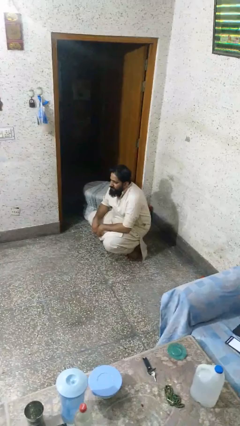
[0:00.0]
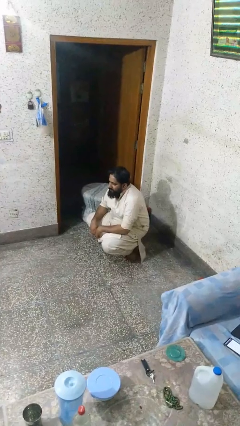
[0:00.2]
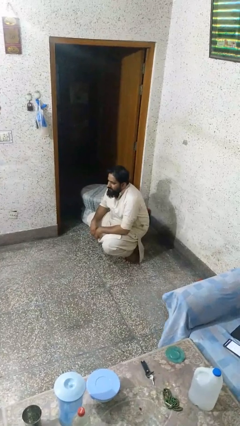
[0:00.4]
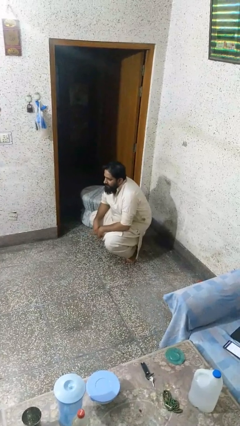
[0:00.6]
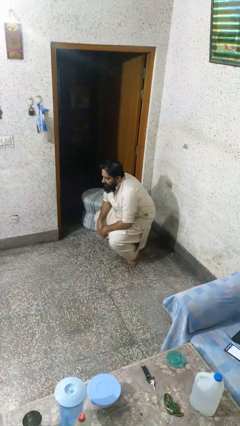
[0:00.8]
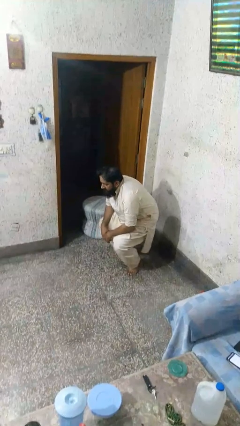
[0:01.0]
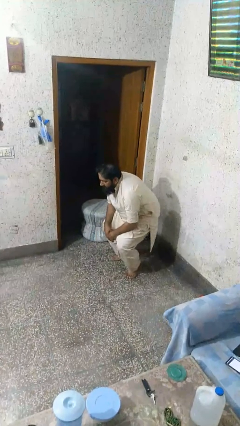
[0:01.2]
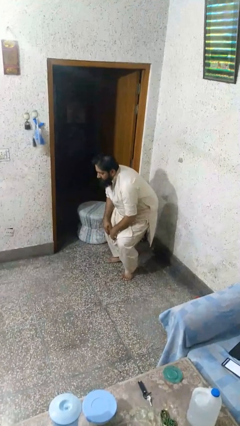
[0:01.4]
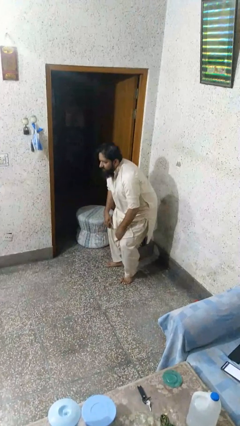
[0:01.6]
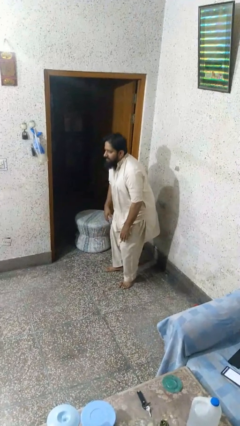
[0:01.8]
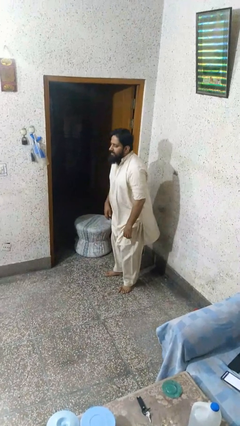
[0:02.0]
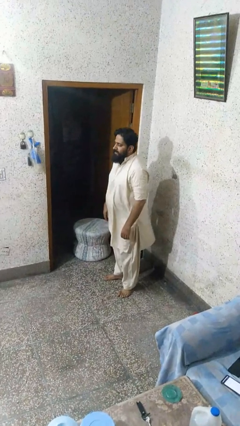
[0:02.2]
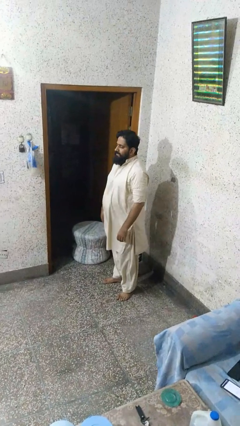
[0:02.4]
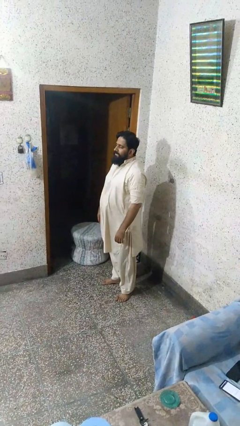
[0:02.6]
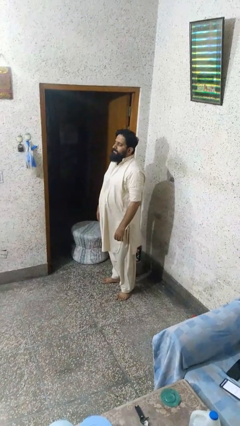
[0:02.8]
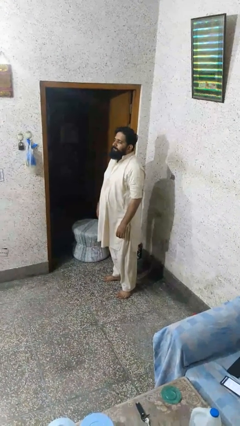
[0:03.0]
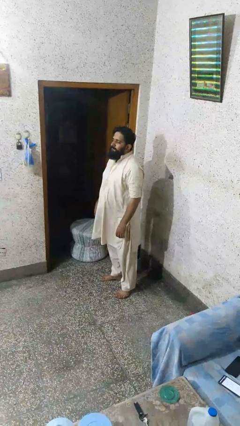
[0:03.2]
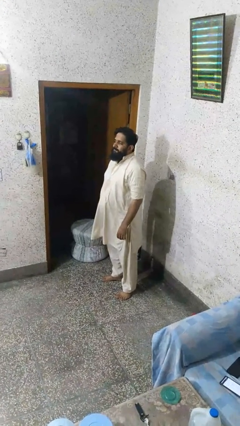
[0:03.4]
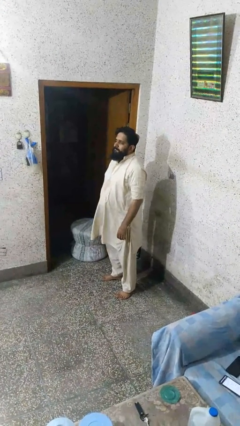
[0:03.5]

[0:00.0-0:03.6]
person stands up

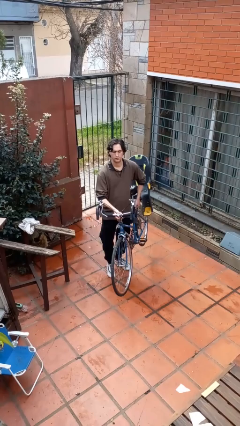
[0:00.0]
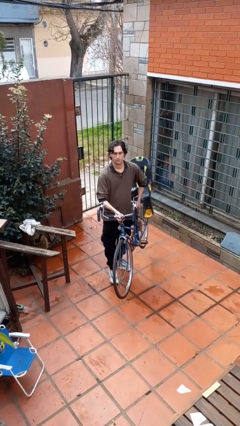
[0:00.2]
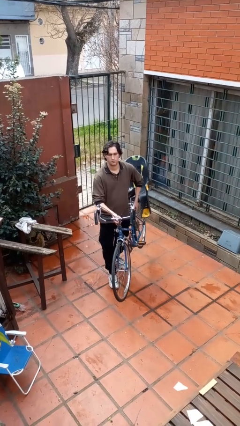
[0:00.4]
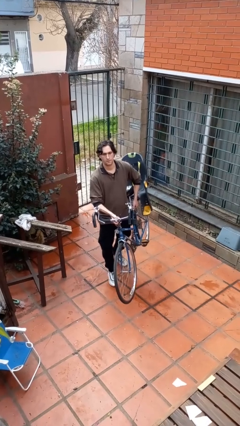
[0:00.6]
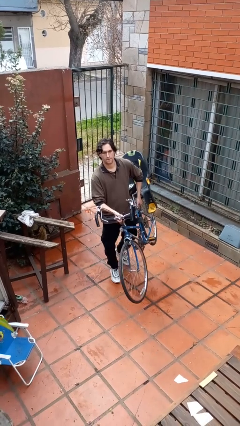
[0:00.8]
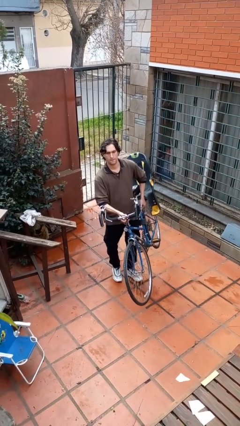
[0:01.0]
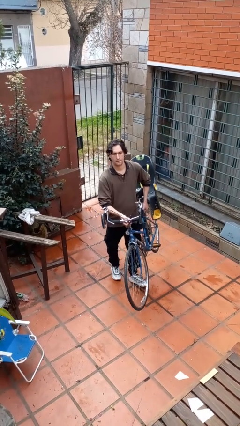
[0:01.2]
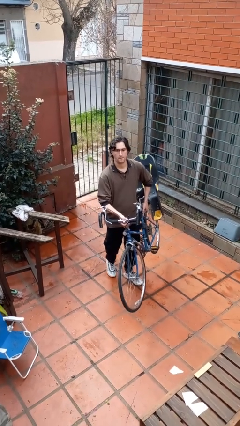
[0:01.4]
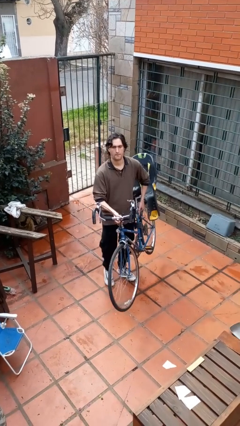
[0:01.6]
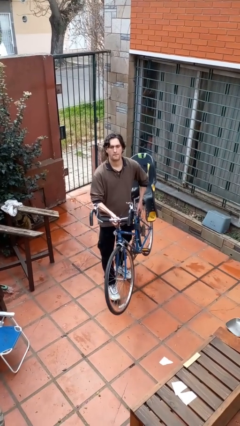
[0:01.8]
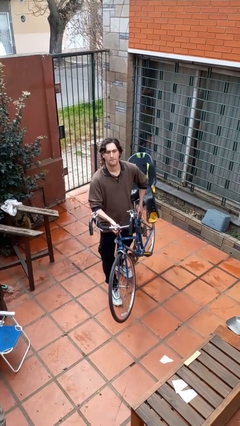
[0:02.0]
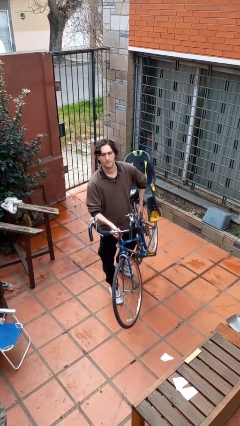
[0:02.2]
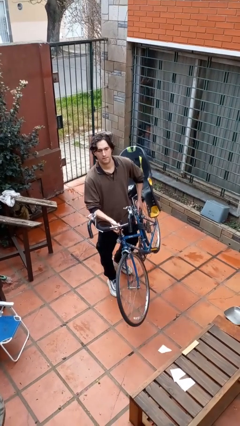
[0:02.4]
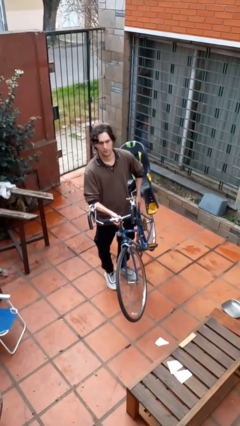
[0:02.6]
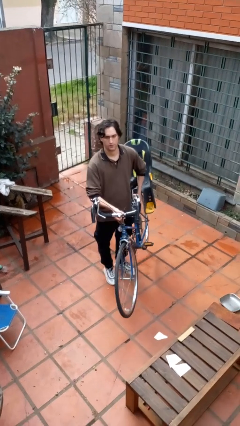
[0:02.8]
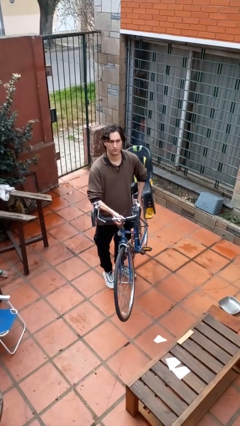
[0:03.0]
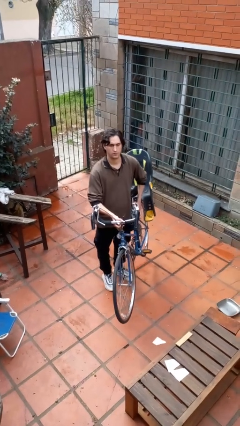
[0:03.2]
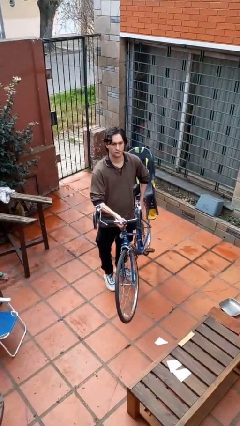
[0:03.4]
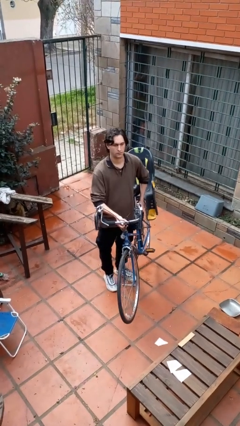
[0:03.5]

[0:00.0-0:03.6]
person carries bicycle

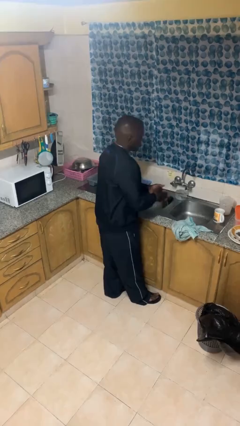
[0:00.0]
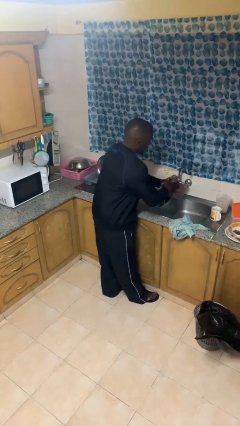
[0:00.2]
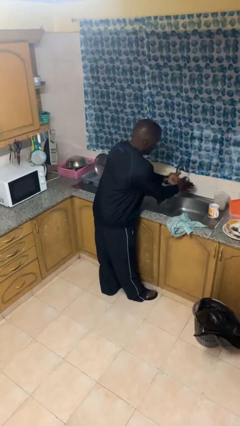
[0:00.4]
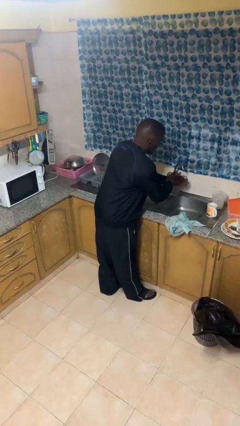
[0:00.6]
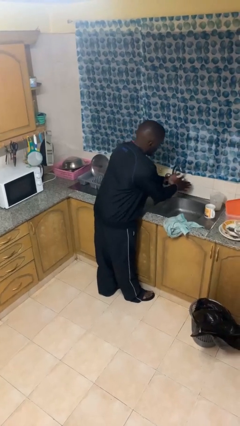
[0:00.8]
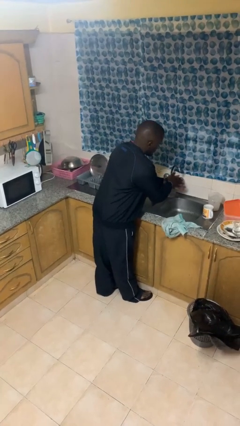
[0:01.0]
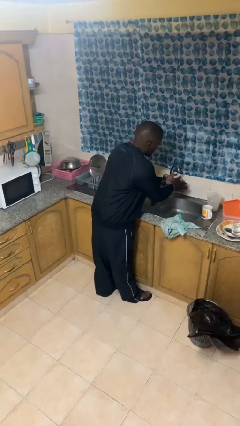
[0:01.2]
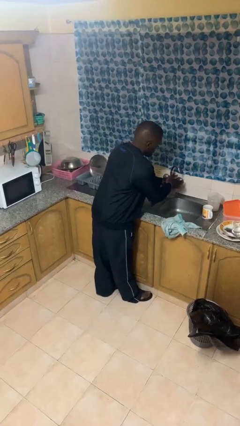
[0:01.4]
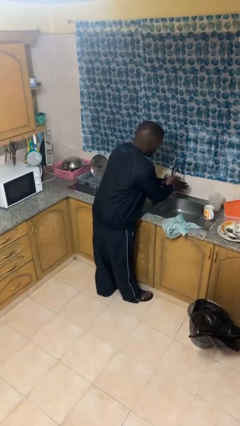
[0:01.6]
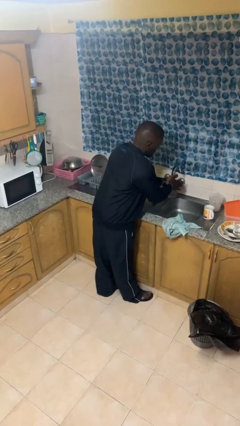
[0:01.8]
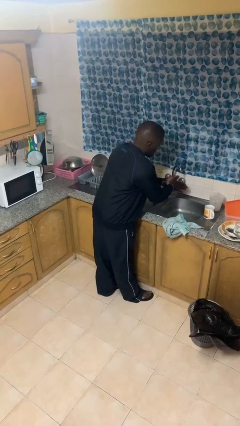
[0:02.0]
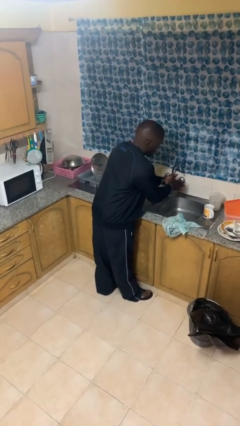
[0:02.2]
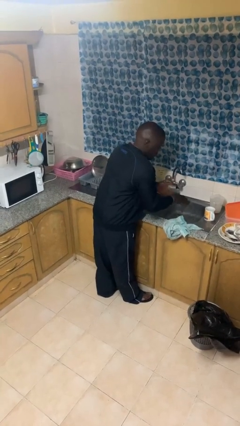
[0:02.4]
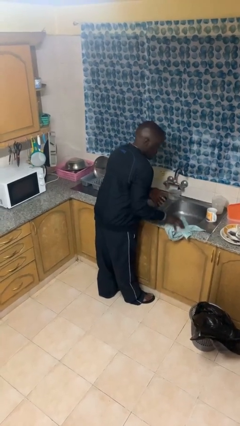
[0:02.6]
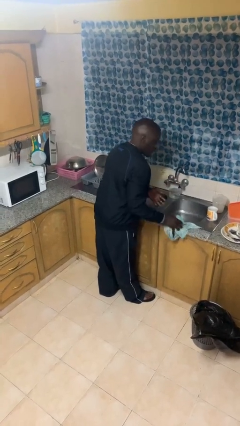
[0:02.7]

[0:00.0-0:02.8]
person washes hands

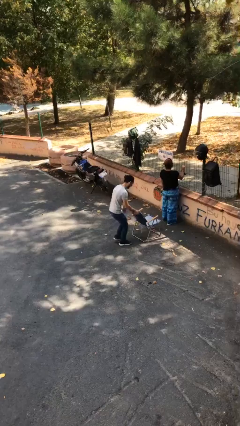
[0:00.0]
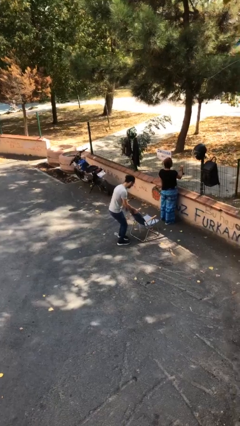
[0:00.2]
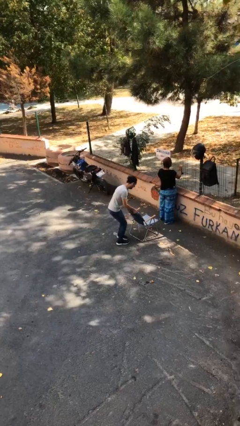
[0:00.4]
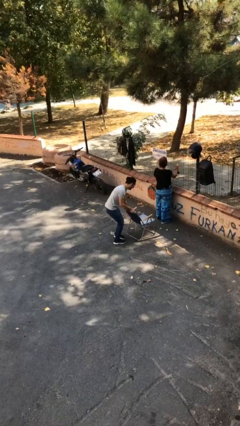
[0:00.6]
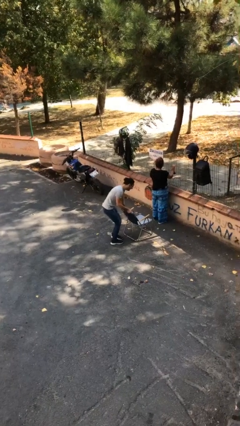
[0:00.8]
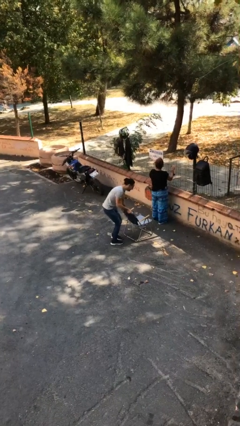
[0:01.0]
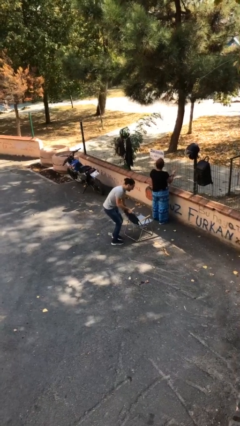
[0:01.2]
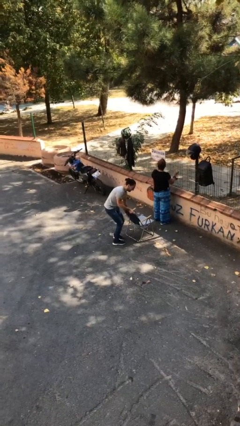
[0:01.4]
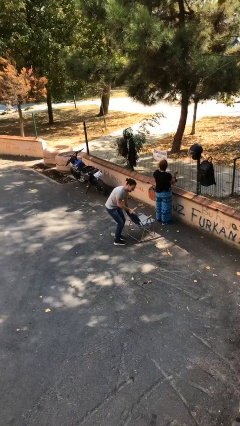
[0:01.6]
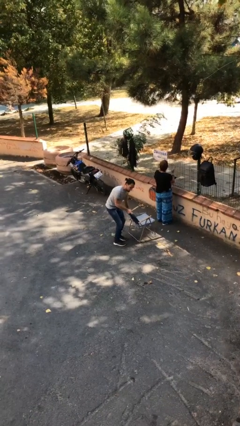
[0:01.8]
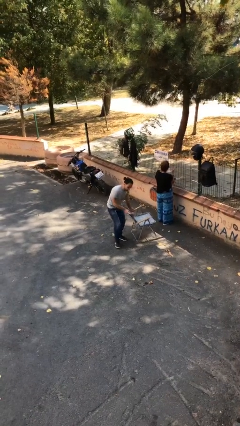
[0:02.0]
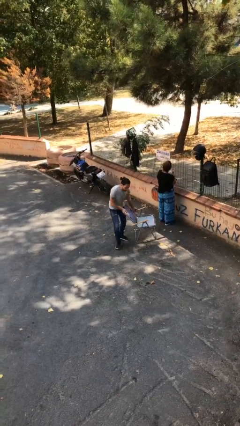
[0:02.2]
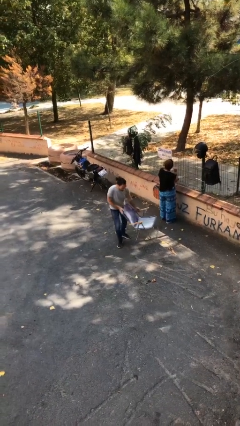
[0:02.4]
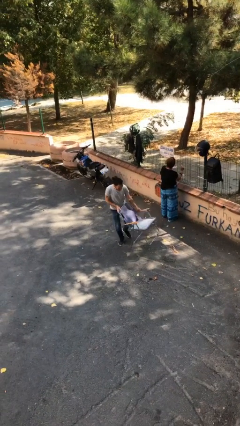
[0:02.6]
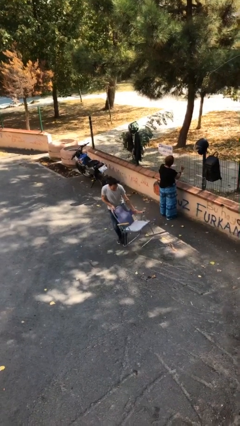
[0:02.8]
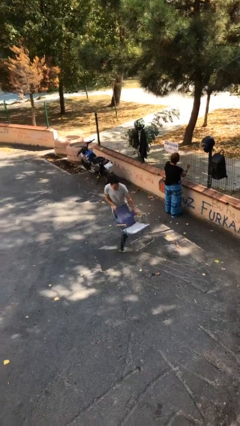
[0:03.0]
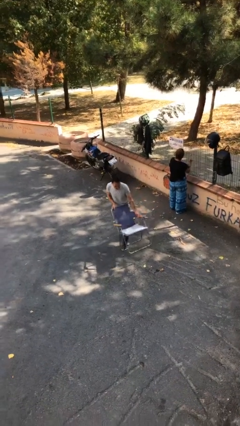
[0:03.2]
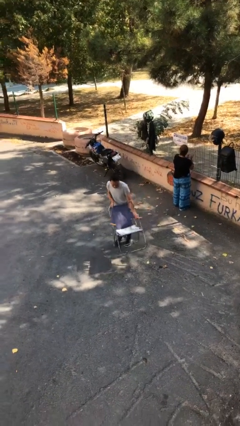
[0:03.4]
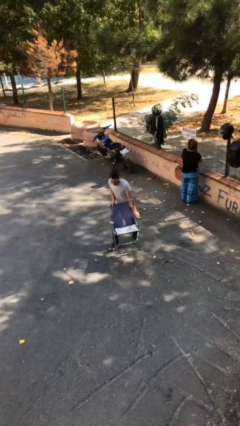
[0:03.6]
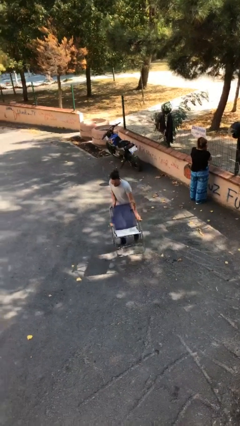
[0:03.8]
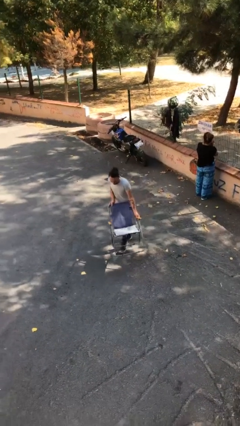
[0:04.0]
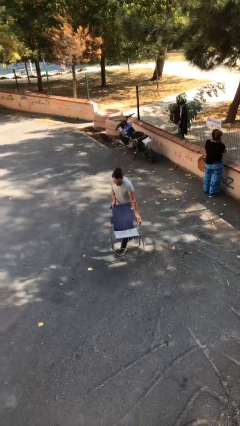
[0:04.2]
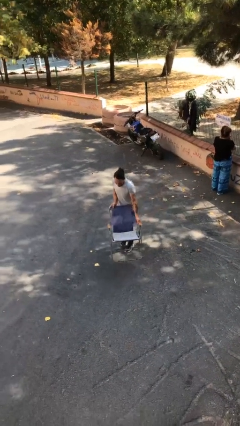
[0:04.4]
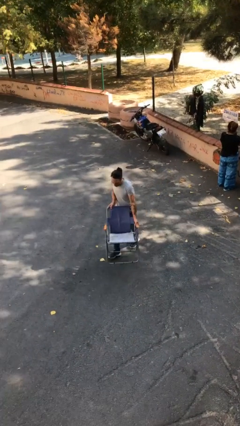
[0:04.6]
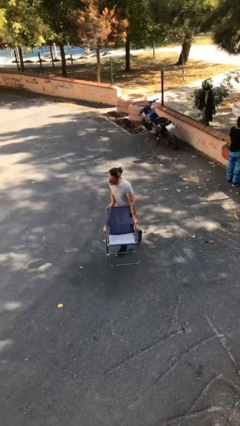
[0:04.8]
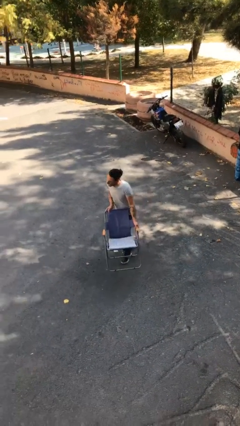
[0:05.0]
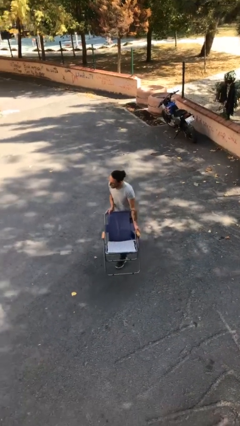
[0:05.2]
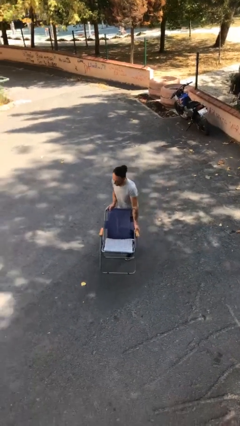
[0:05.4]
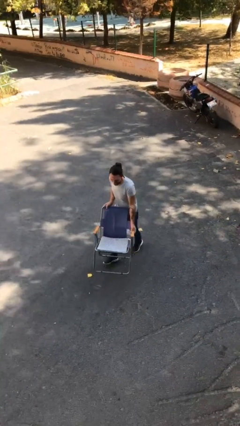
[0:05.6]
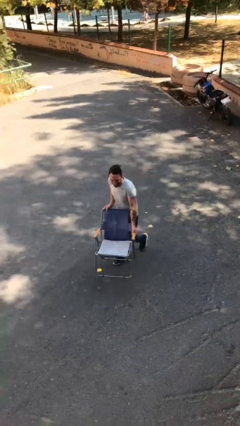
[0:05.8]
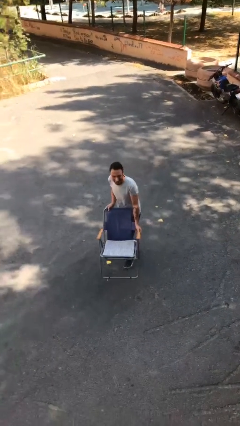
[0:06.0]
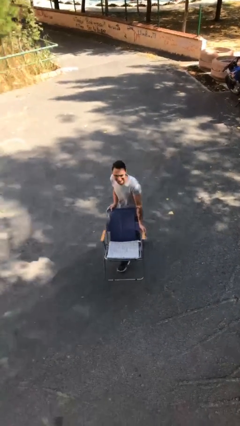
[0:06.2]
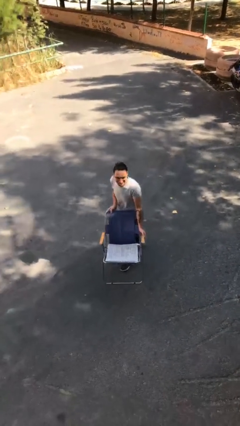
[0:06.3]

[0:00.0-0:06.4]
person steals object from person

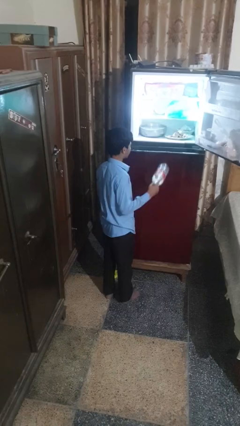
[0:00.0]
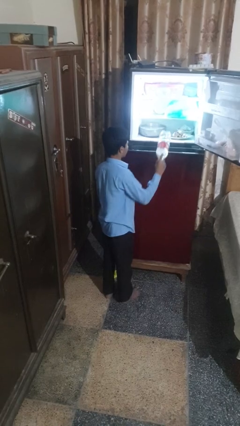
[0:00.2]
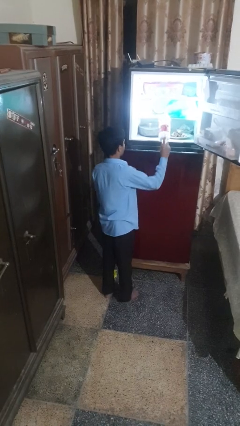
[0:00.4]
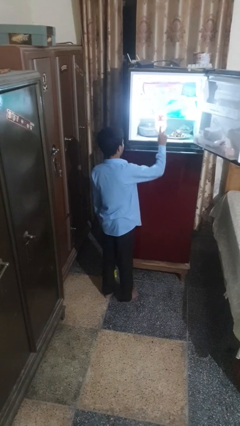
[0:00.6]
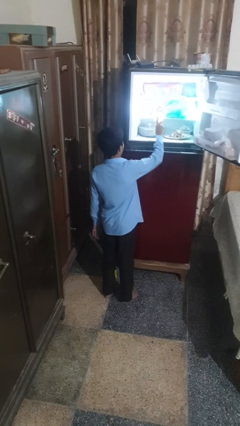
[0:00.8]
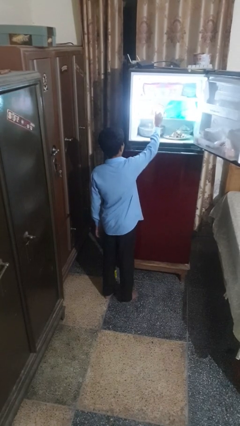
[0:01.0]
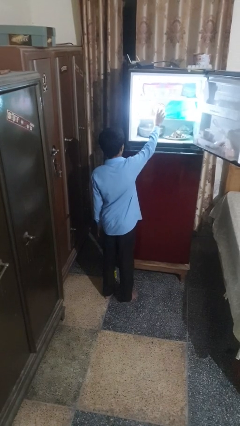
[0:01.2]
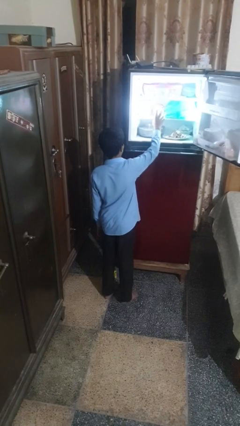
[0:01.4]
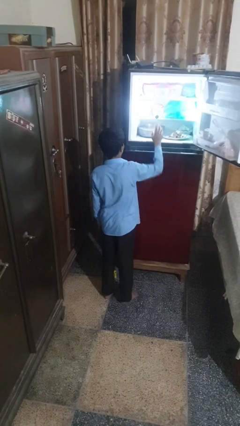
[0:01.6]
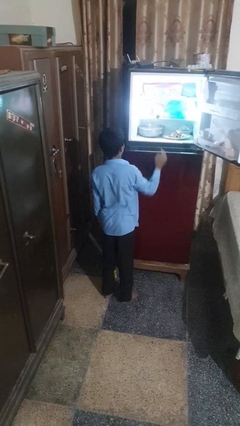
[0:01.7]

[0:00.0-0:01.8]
person puts object into refrigerator
